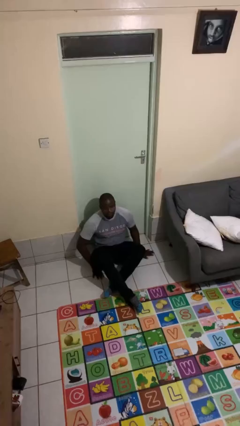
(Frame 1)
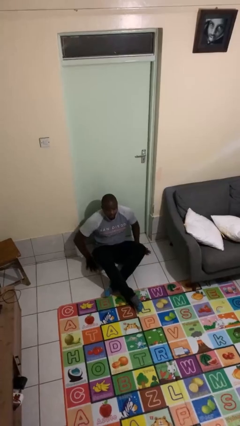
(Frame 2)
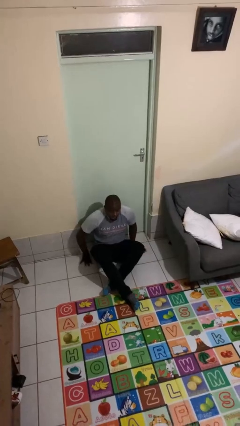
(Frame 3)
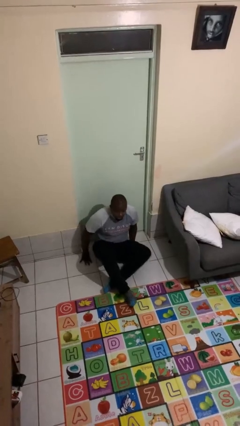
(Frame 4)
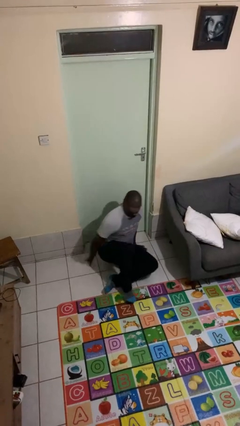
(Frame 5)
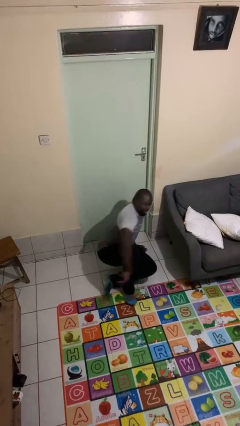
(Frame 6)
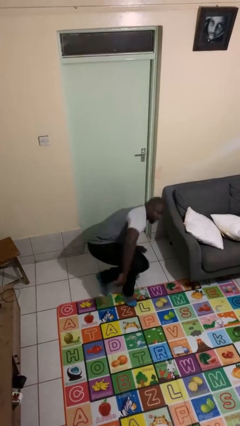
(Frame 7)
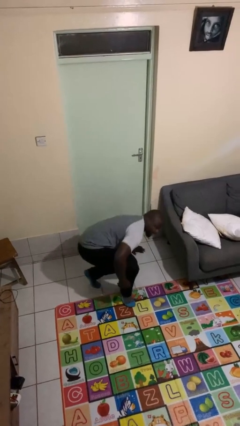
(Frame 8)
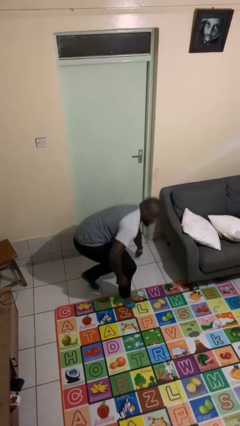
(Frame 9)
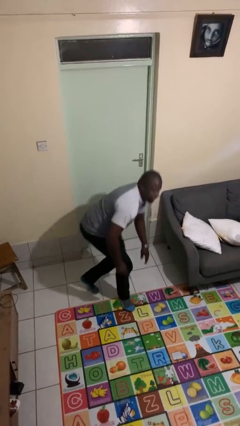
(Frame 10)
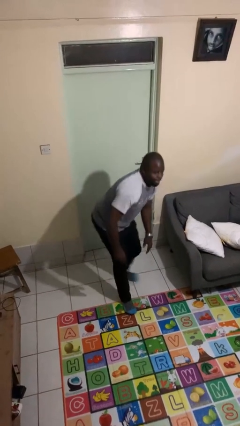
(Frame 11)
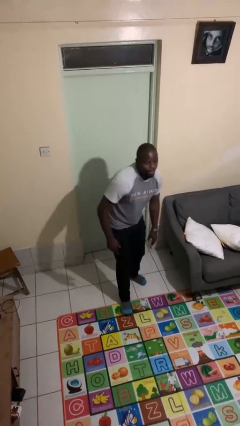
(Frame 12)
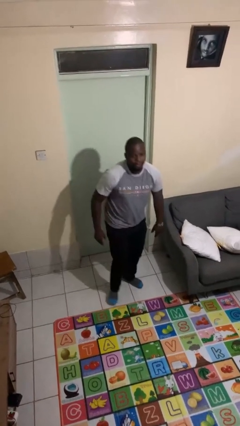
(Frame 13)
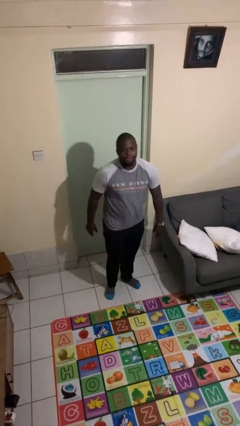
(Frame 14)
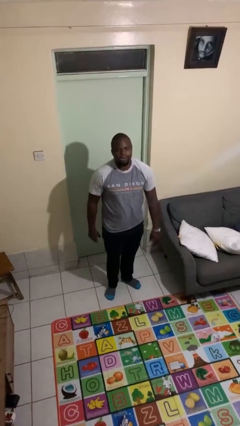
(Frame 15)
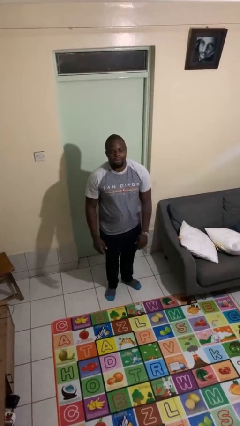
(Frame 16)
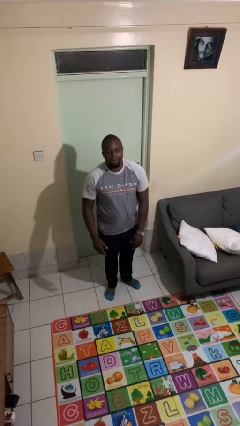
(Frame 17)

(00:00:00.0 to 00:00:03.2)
person stands up from floor

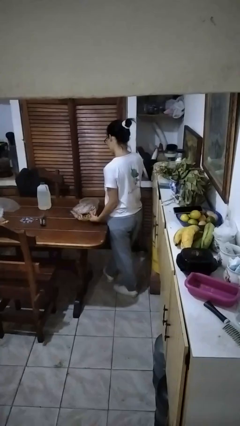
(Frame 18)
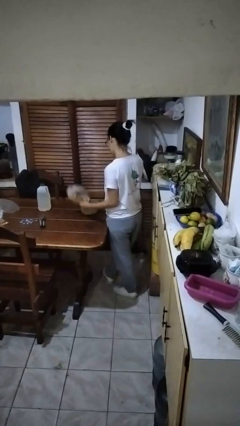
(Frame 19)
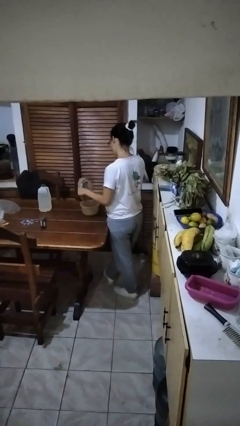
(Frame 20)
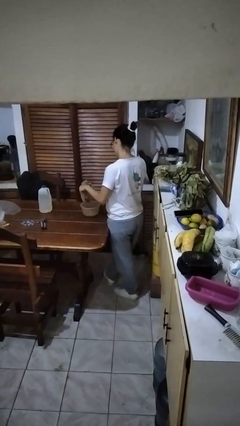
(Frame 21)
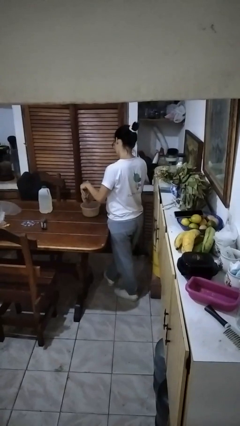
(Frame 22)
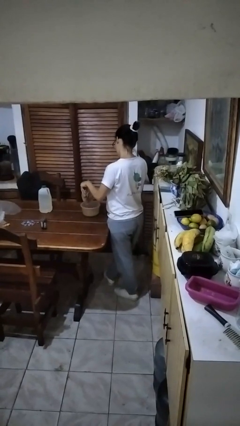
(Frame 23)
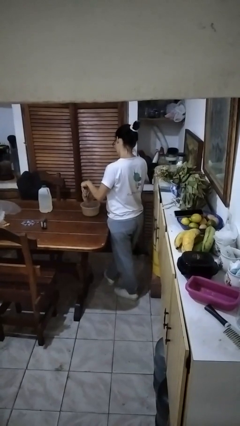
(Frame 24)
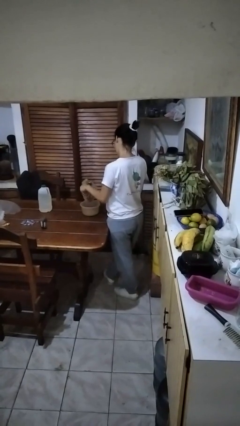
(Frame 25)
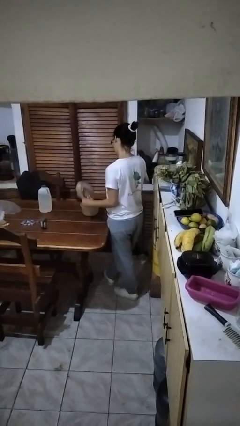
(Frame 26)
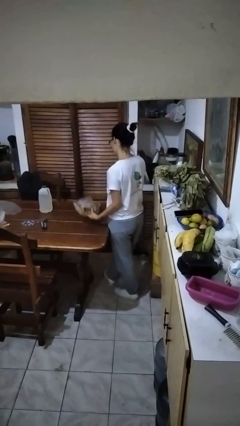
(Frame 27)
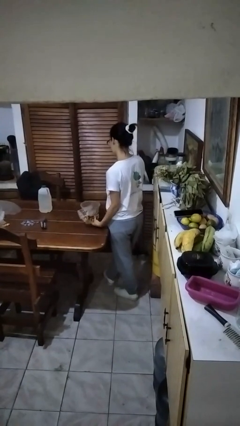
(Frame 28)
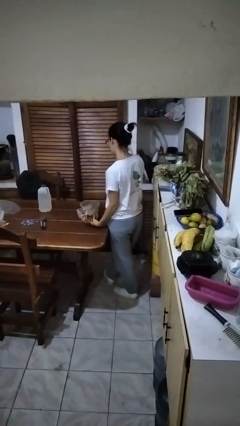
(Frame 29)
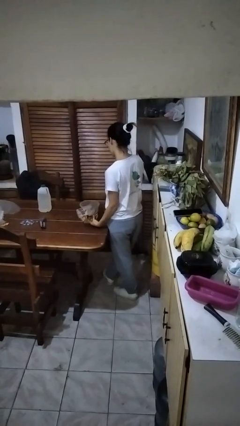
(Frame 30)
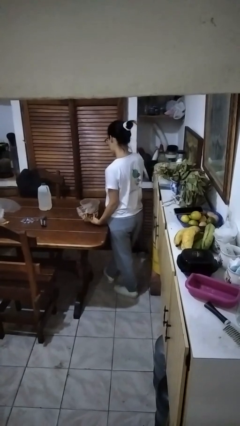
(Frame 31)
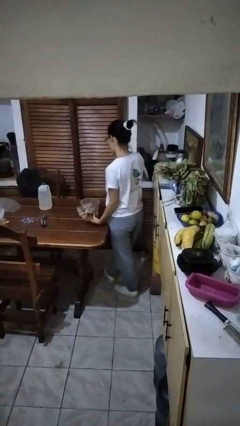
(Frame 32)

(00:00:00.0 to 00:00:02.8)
person pours into bowl

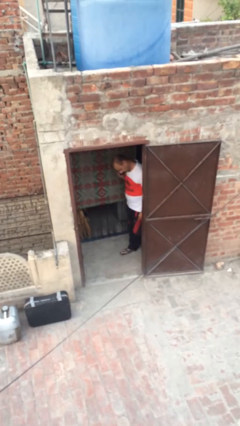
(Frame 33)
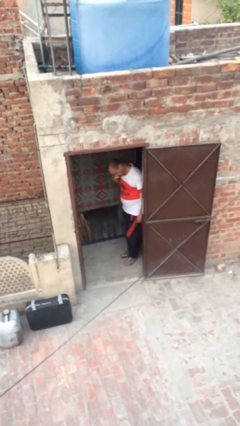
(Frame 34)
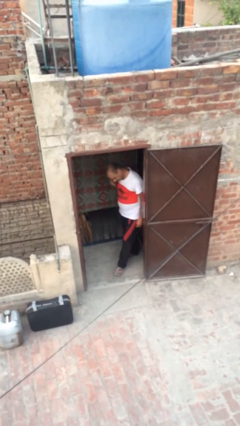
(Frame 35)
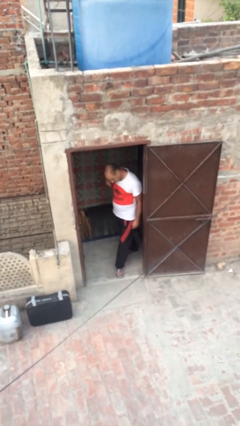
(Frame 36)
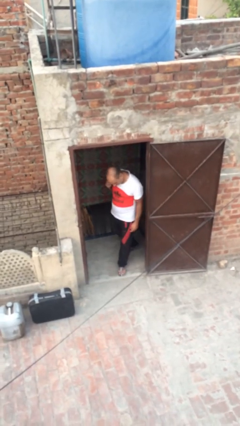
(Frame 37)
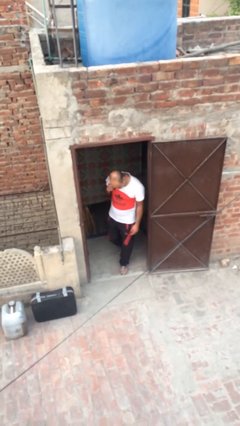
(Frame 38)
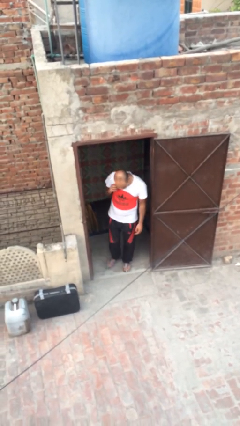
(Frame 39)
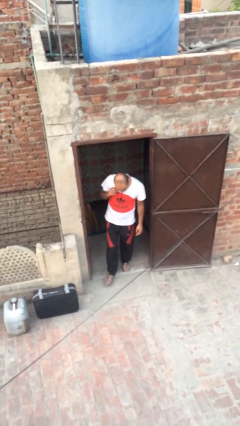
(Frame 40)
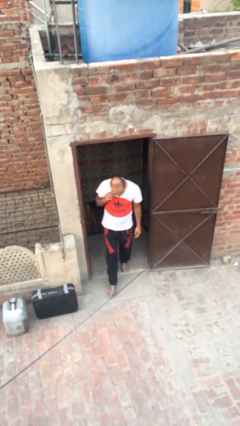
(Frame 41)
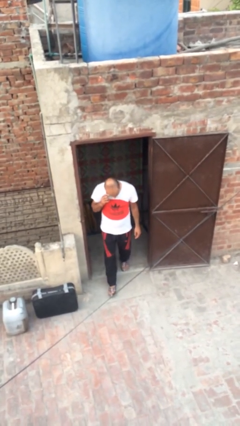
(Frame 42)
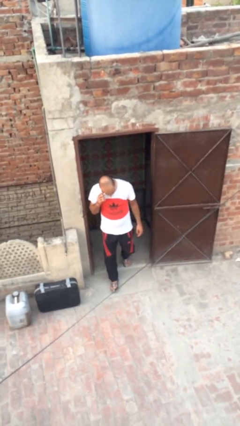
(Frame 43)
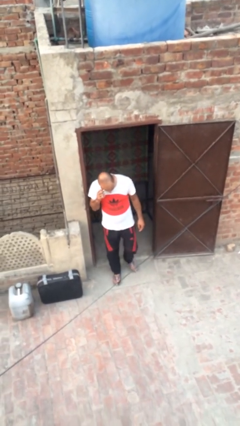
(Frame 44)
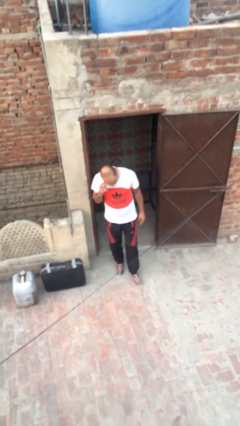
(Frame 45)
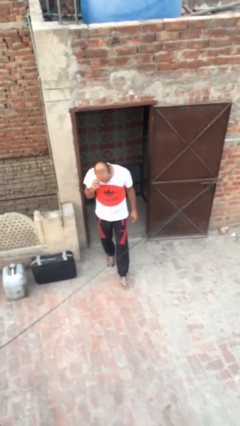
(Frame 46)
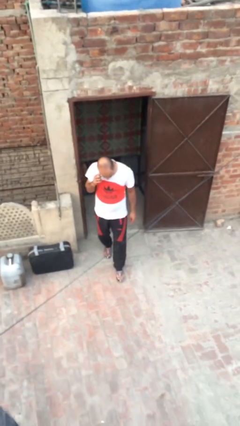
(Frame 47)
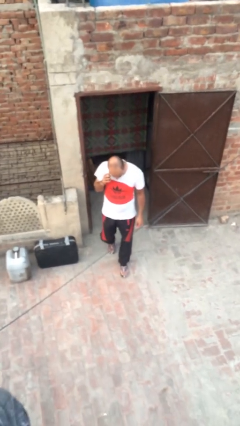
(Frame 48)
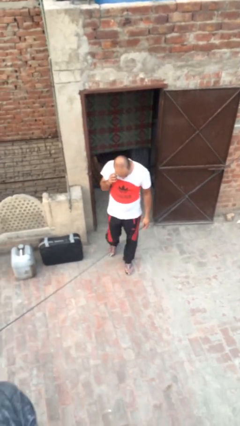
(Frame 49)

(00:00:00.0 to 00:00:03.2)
person enters scene through structure

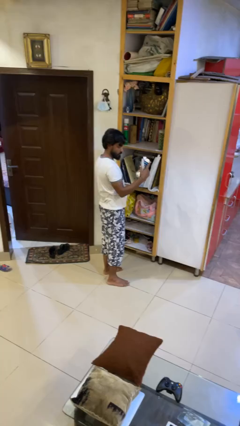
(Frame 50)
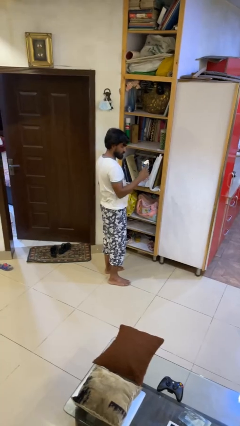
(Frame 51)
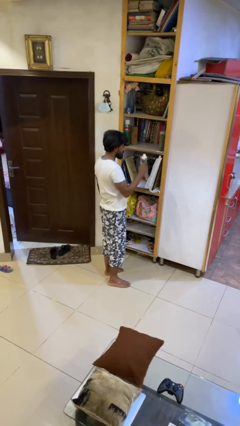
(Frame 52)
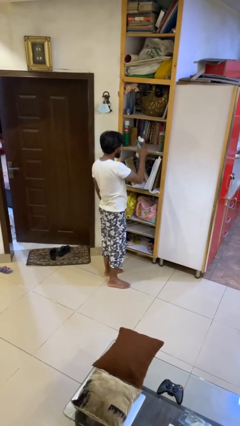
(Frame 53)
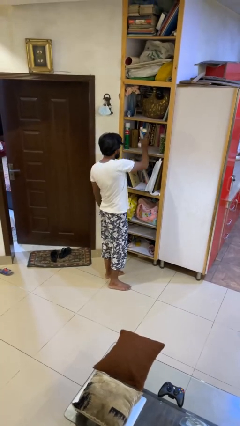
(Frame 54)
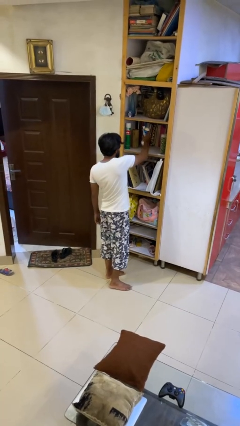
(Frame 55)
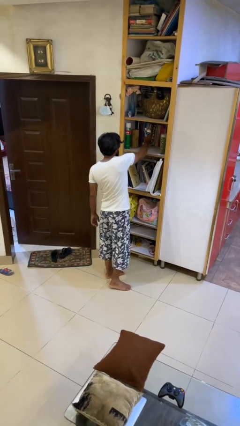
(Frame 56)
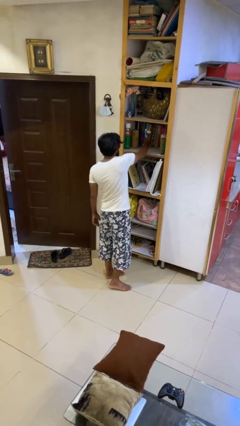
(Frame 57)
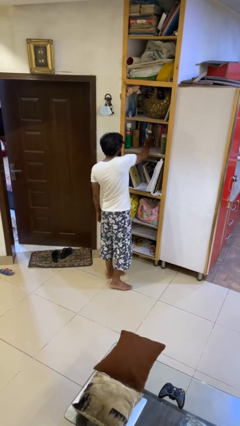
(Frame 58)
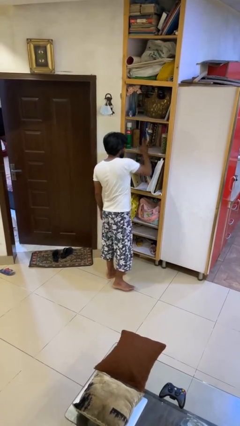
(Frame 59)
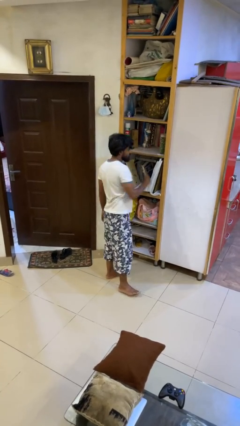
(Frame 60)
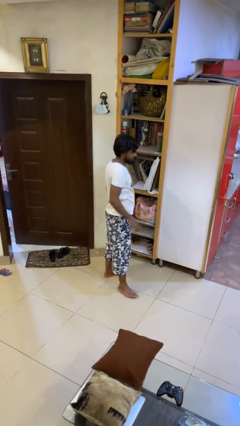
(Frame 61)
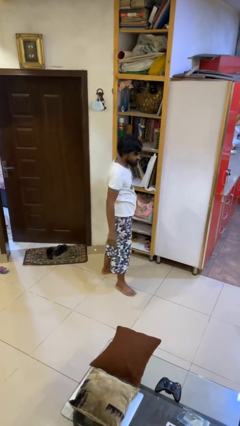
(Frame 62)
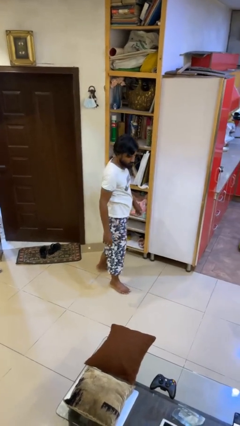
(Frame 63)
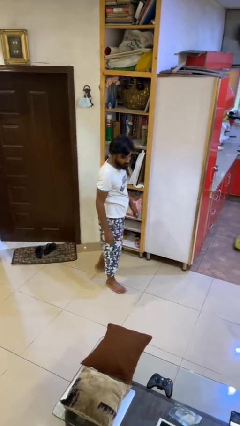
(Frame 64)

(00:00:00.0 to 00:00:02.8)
person puts down object into cabinet

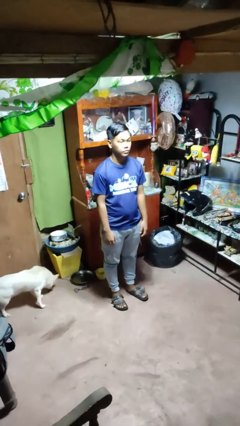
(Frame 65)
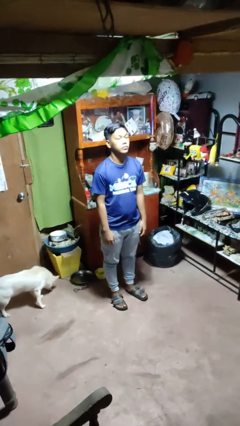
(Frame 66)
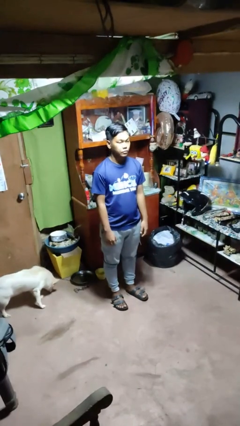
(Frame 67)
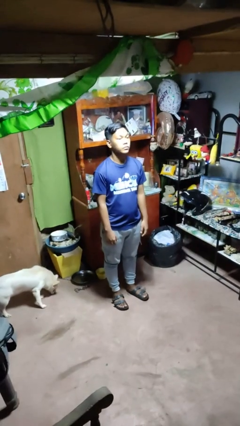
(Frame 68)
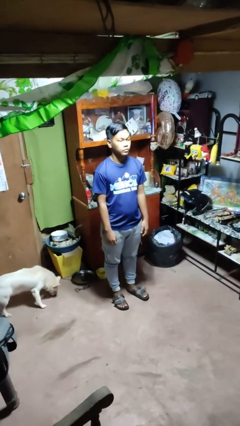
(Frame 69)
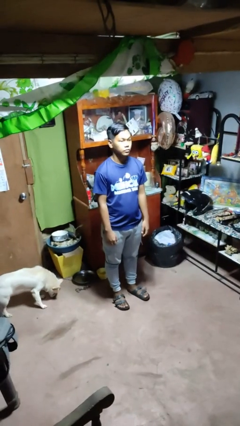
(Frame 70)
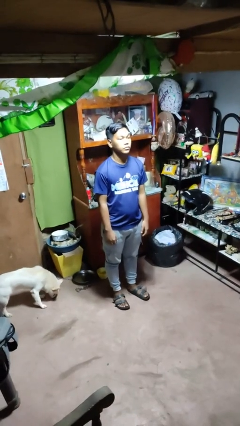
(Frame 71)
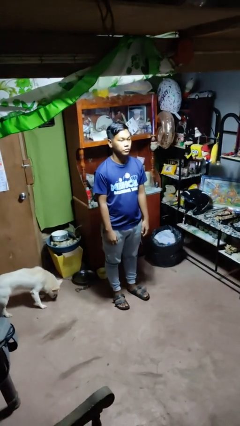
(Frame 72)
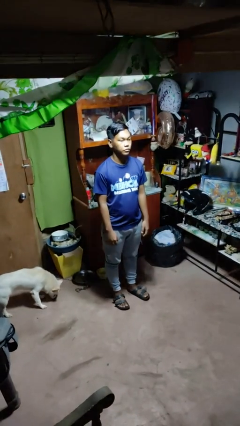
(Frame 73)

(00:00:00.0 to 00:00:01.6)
person nods head

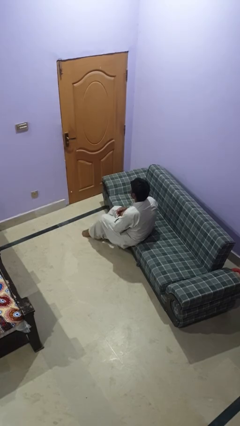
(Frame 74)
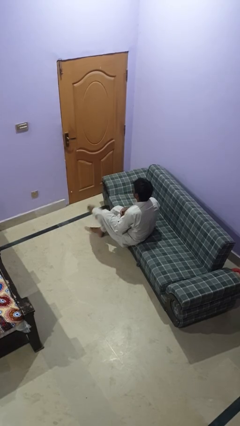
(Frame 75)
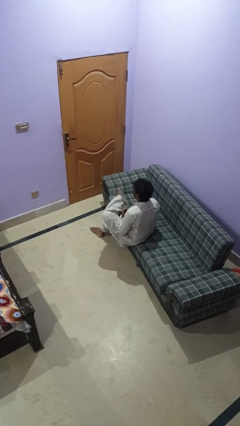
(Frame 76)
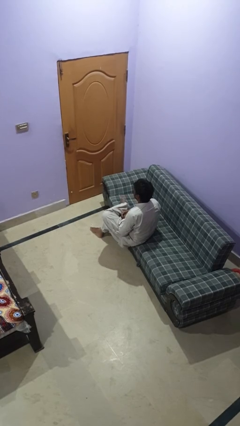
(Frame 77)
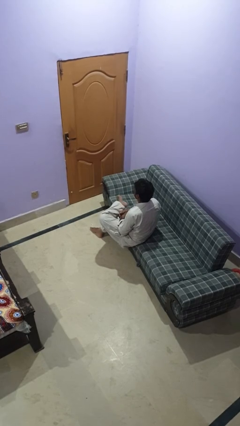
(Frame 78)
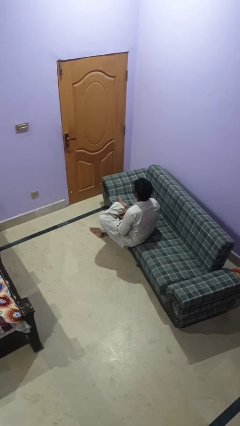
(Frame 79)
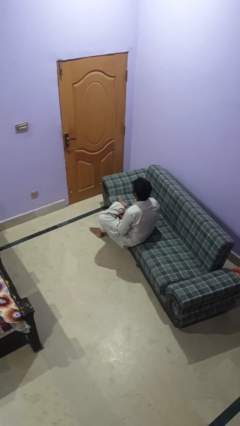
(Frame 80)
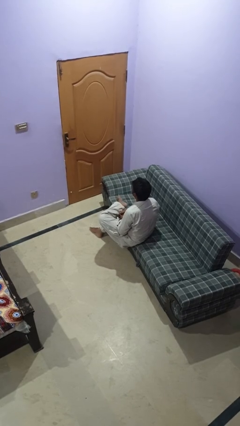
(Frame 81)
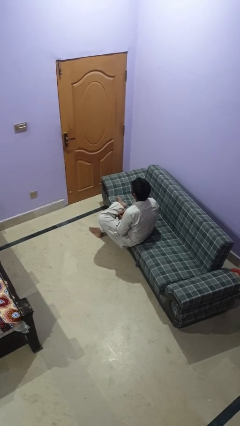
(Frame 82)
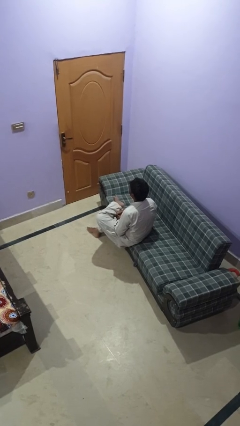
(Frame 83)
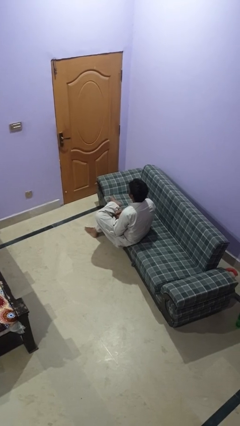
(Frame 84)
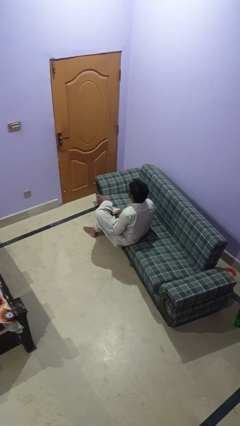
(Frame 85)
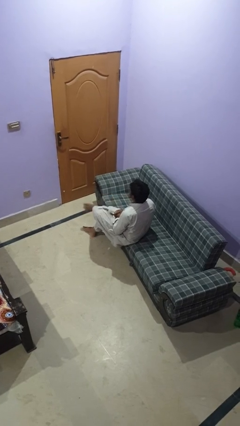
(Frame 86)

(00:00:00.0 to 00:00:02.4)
person crosses legs

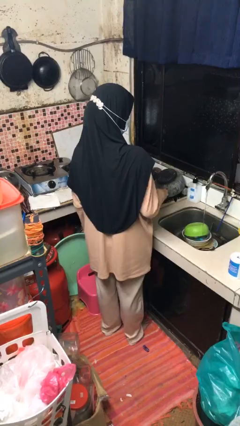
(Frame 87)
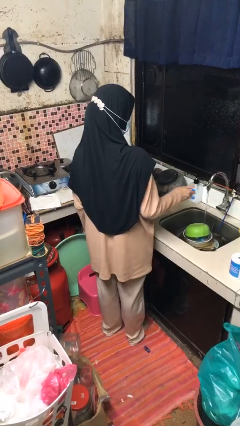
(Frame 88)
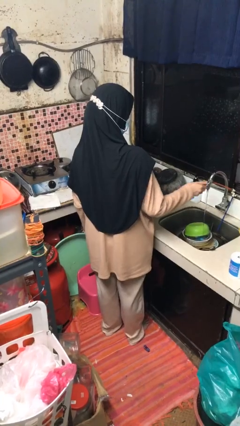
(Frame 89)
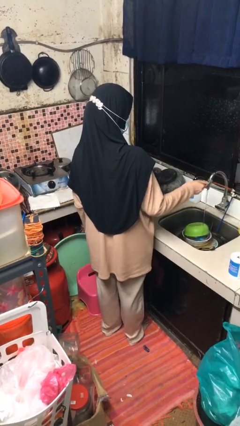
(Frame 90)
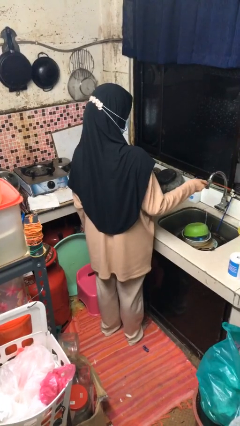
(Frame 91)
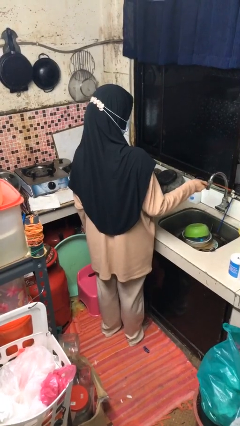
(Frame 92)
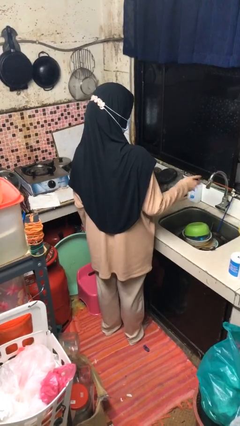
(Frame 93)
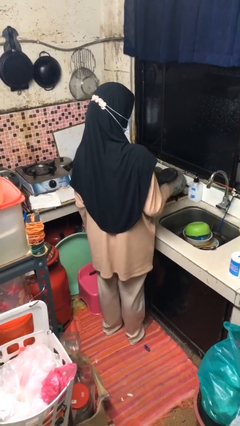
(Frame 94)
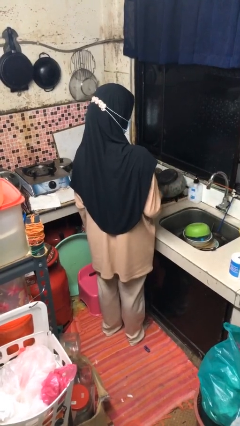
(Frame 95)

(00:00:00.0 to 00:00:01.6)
person turns off faucet
